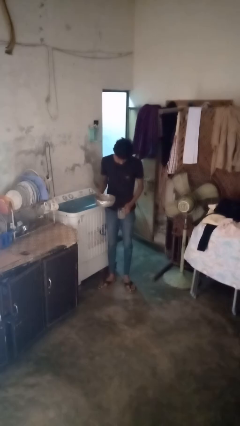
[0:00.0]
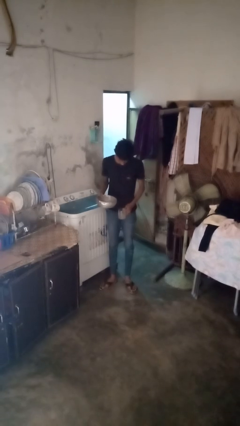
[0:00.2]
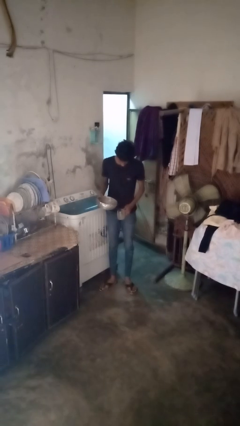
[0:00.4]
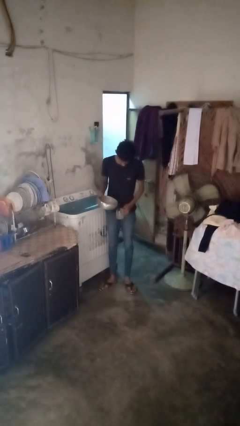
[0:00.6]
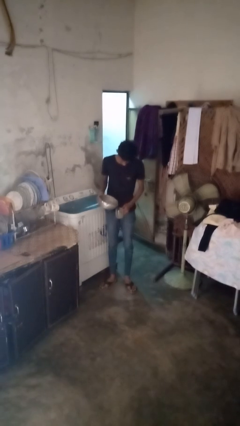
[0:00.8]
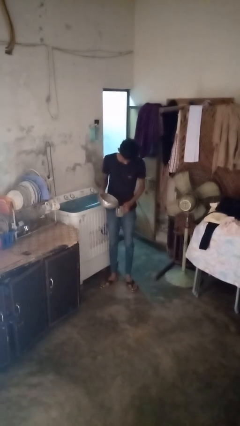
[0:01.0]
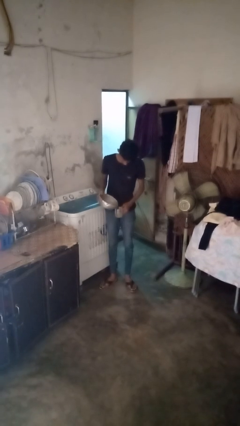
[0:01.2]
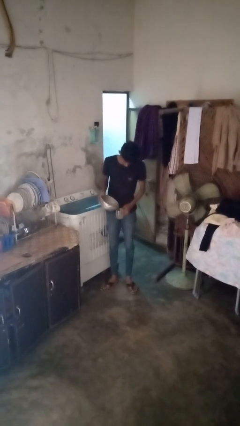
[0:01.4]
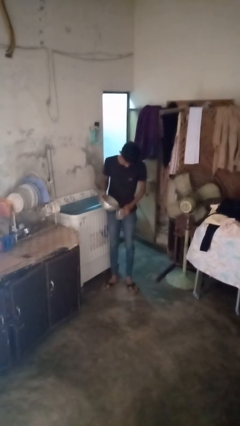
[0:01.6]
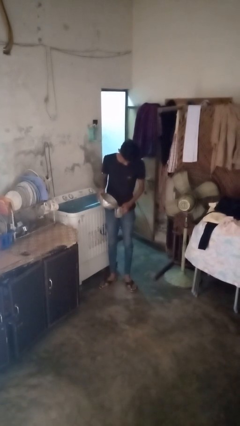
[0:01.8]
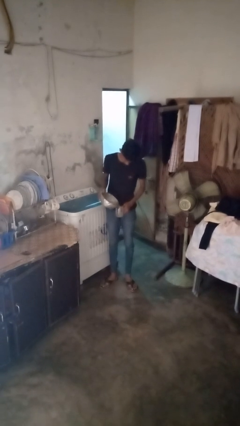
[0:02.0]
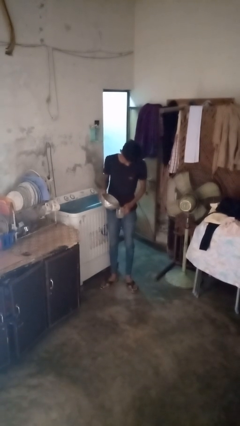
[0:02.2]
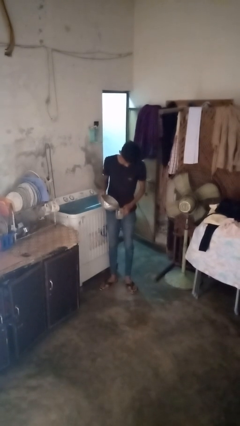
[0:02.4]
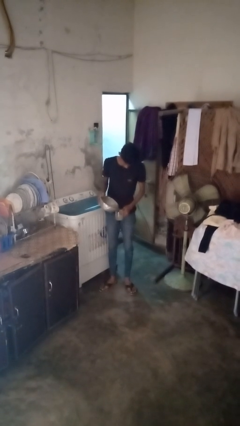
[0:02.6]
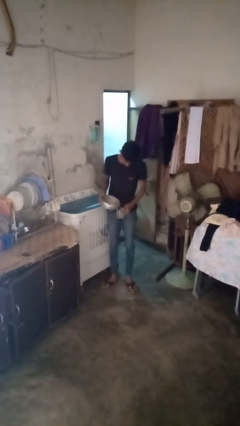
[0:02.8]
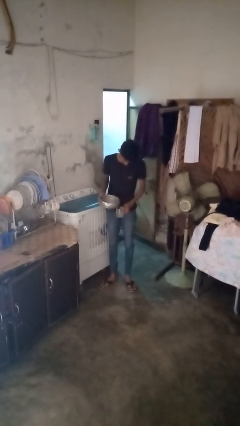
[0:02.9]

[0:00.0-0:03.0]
person pours liquid into cup

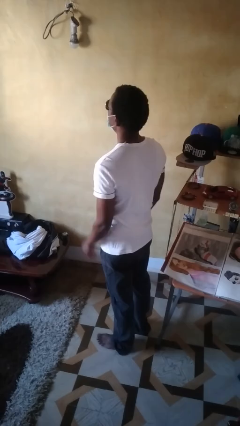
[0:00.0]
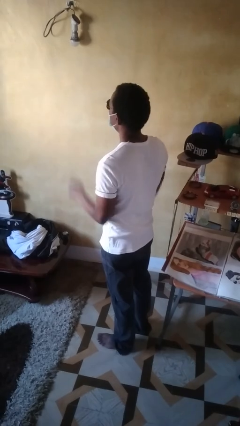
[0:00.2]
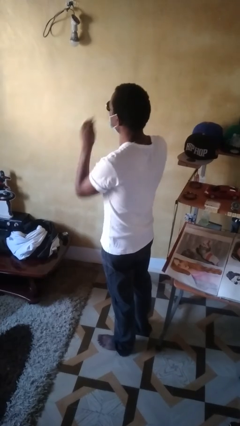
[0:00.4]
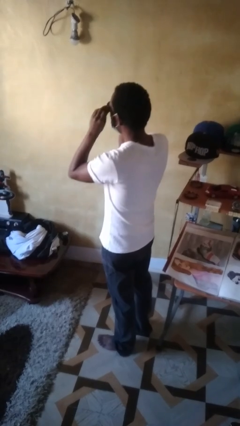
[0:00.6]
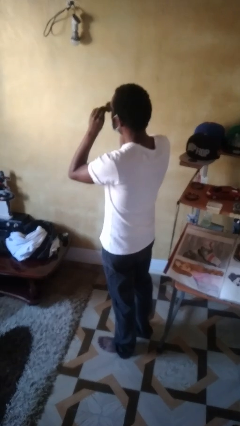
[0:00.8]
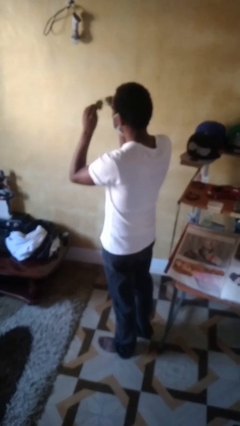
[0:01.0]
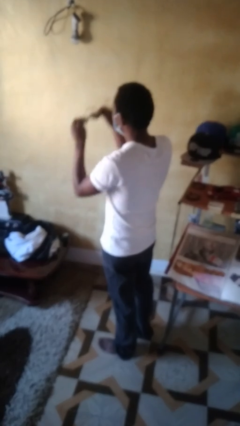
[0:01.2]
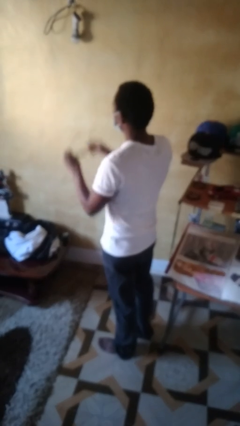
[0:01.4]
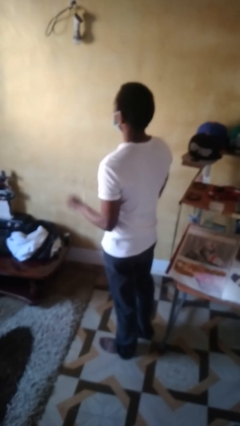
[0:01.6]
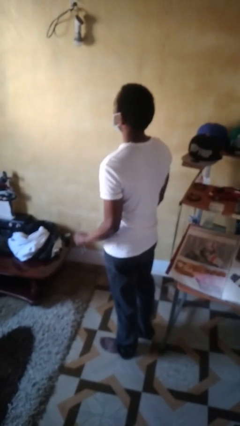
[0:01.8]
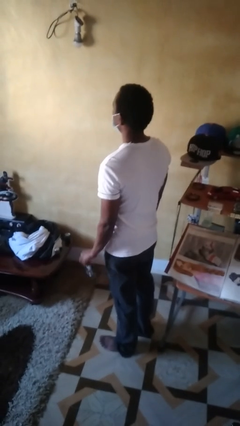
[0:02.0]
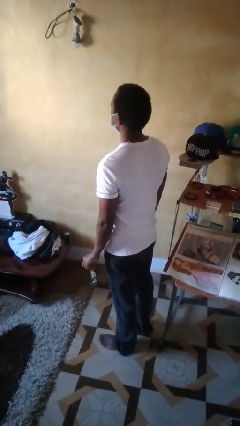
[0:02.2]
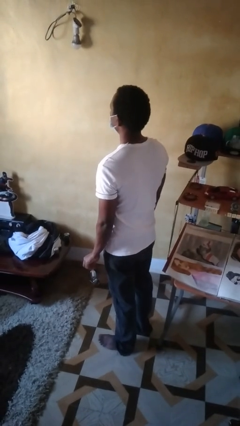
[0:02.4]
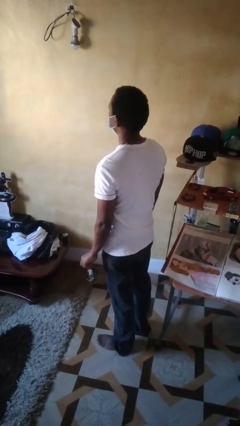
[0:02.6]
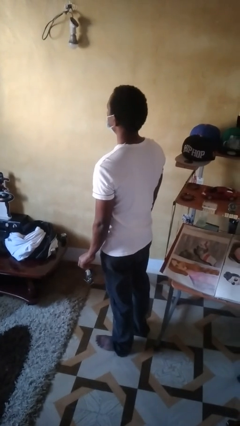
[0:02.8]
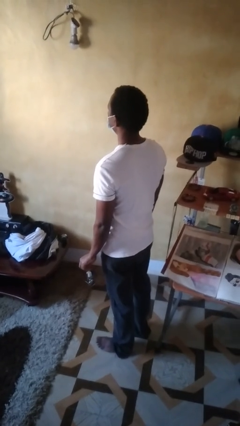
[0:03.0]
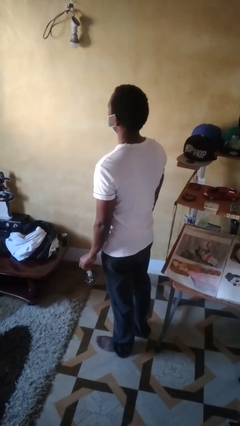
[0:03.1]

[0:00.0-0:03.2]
person takes off sunglasses

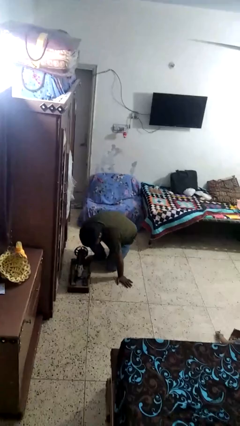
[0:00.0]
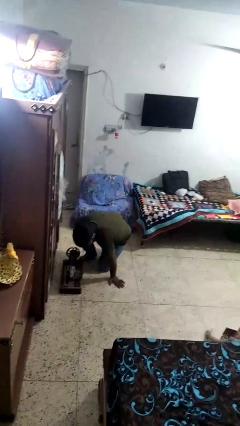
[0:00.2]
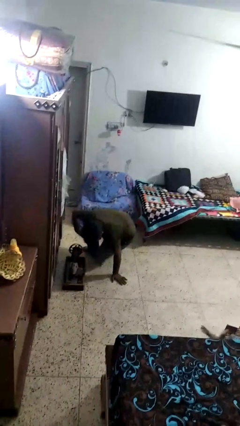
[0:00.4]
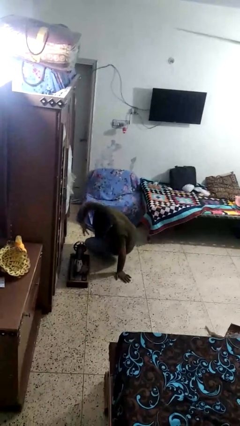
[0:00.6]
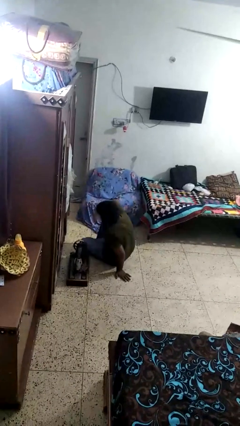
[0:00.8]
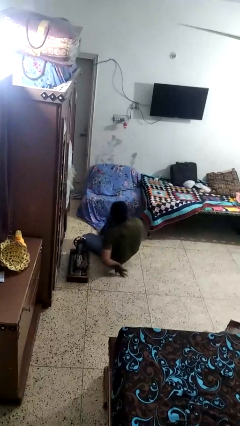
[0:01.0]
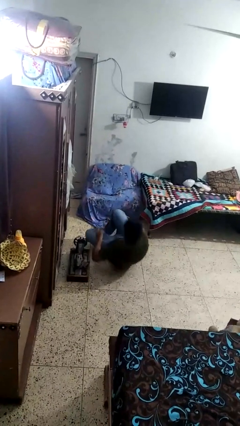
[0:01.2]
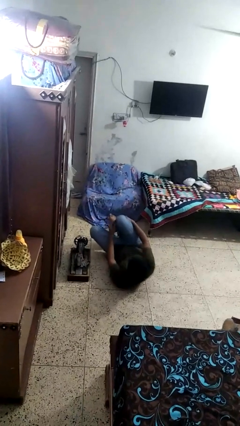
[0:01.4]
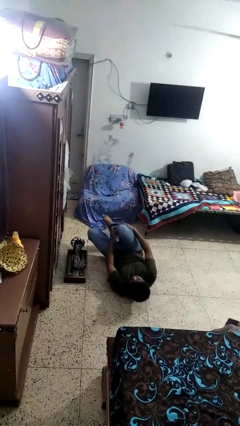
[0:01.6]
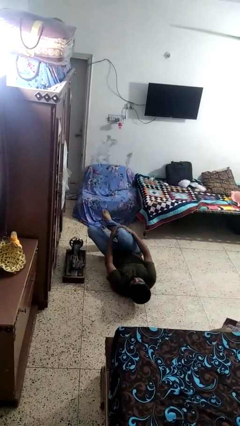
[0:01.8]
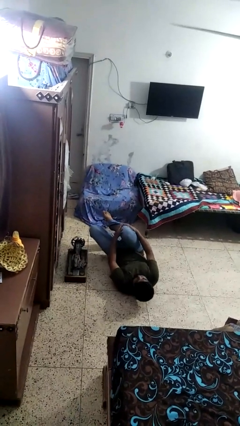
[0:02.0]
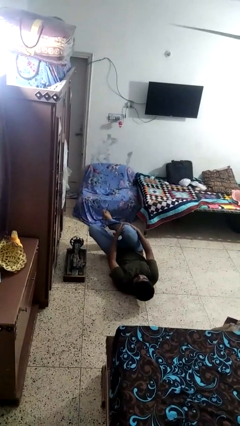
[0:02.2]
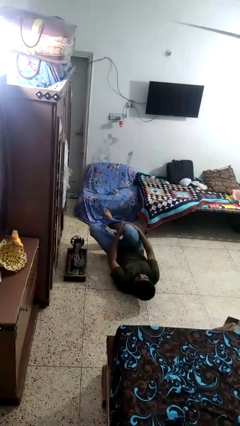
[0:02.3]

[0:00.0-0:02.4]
person lies down on floor

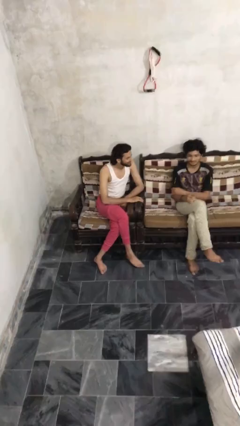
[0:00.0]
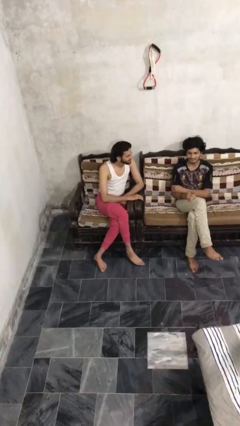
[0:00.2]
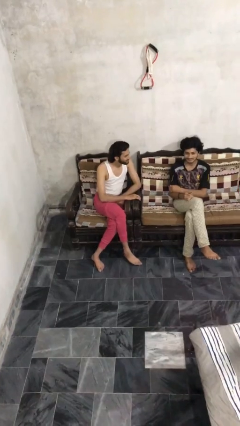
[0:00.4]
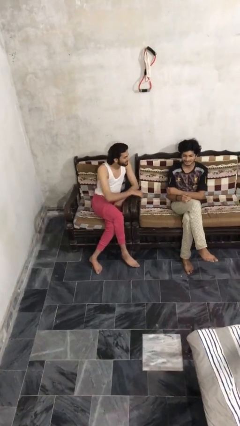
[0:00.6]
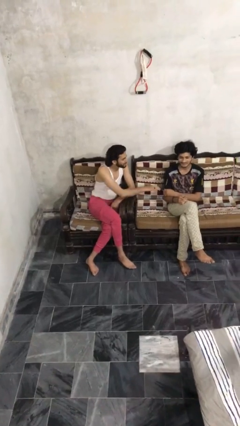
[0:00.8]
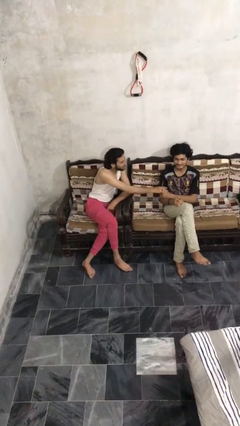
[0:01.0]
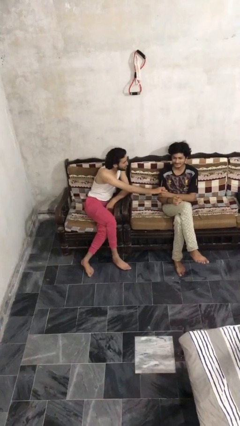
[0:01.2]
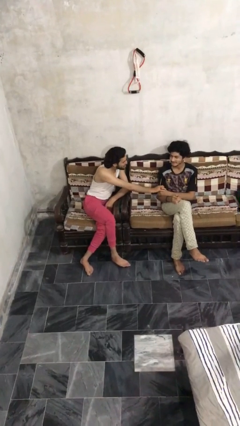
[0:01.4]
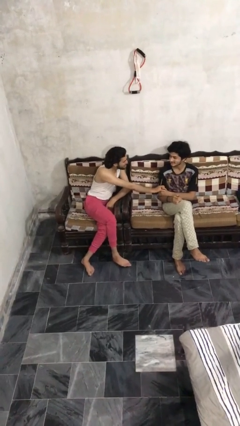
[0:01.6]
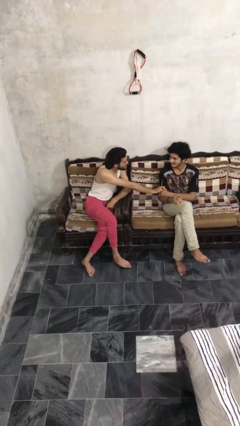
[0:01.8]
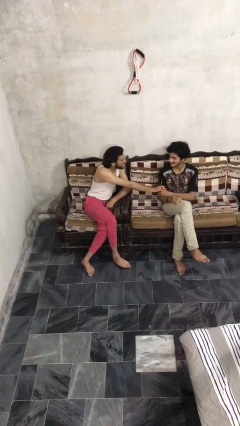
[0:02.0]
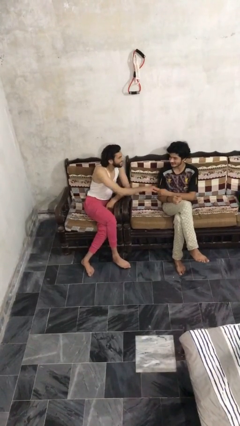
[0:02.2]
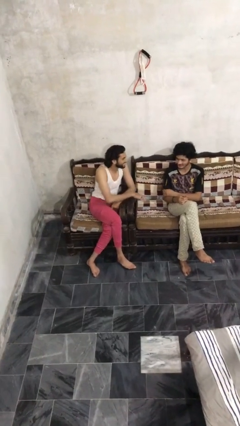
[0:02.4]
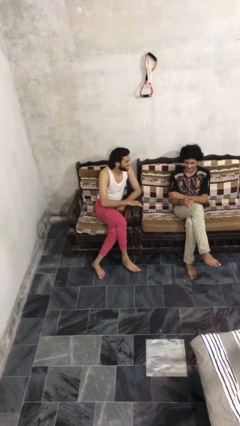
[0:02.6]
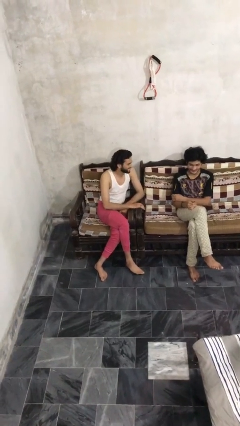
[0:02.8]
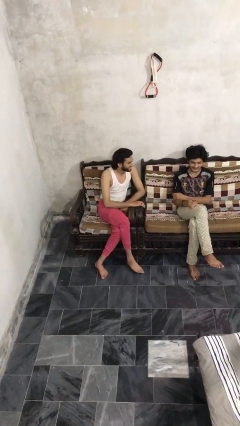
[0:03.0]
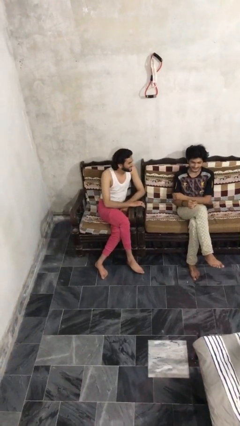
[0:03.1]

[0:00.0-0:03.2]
person grabs person by bicep

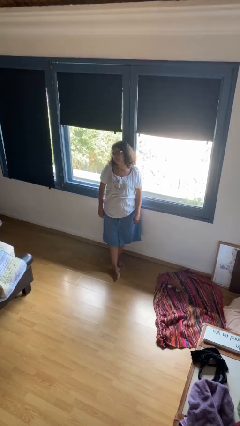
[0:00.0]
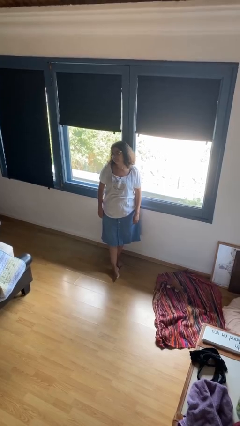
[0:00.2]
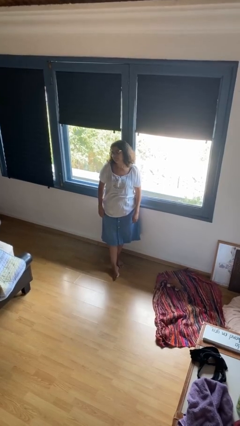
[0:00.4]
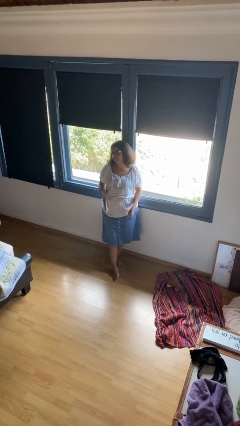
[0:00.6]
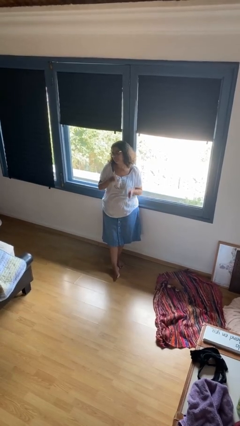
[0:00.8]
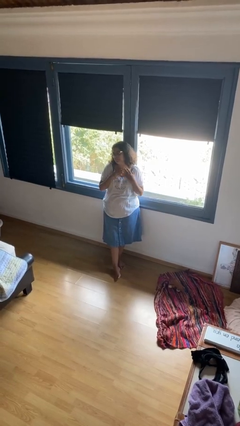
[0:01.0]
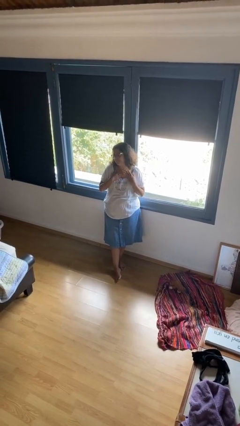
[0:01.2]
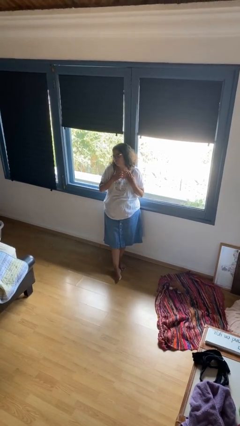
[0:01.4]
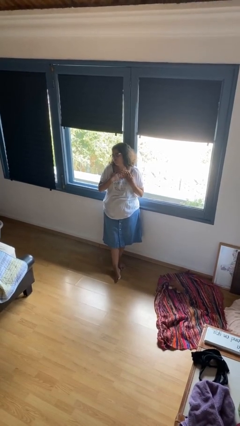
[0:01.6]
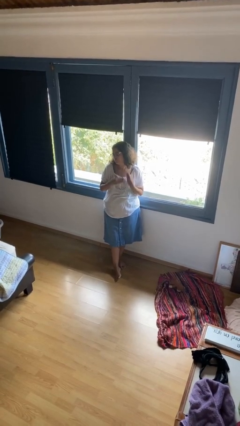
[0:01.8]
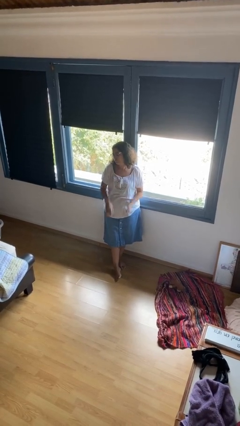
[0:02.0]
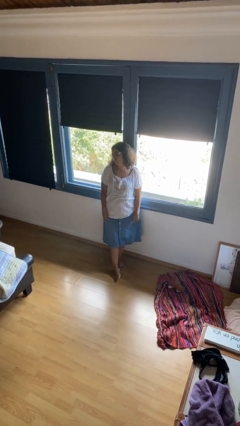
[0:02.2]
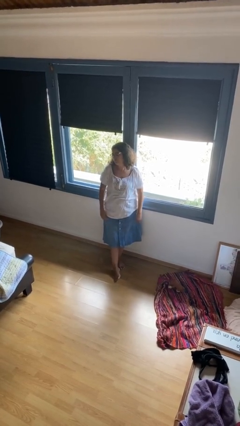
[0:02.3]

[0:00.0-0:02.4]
person drums on chest

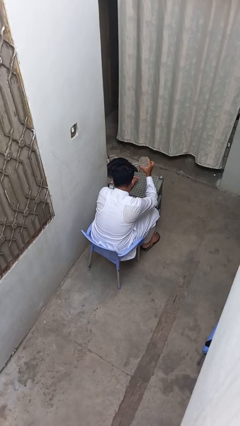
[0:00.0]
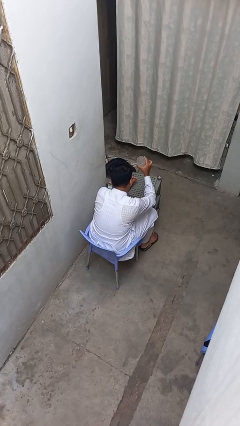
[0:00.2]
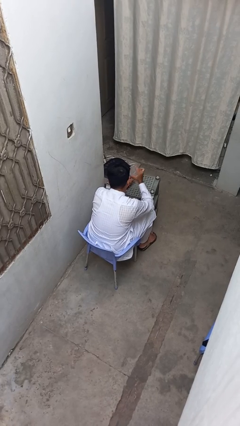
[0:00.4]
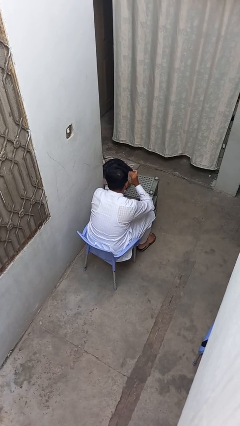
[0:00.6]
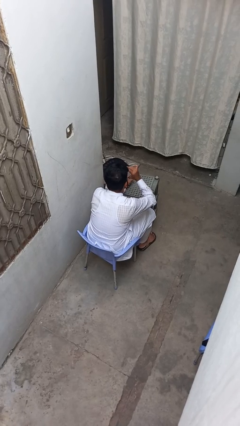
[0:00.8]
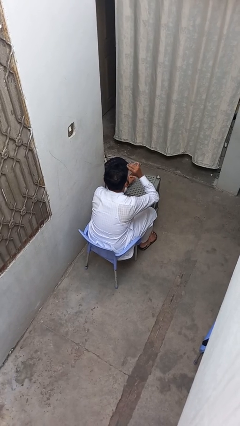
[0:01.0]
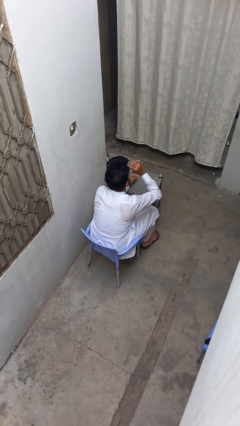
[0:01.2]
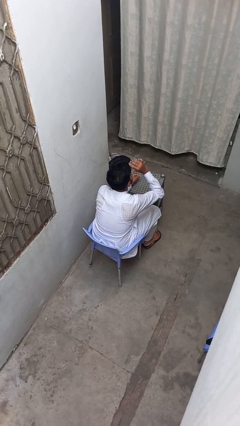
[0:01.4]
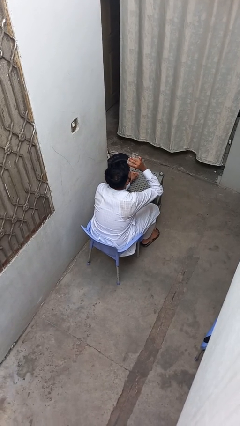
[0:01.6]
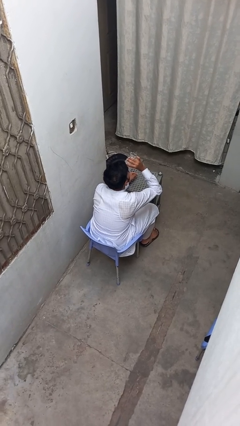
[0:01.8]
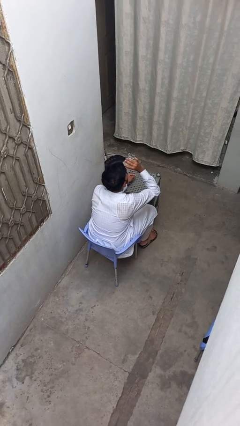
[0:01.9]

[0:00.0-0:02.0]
person drinks from shotglass

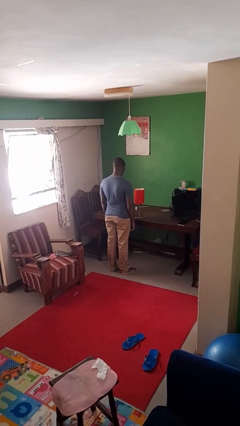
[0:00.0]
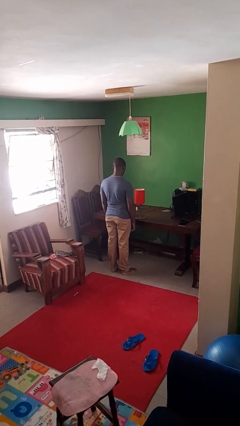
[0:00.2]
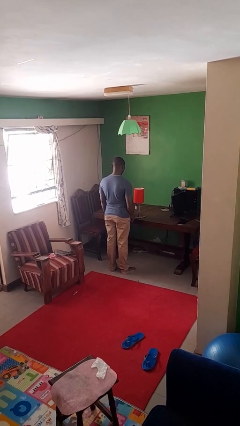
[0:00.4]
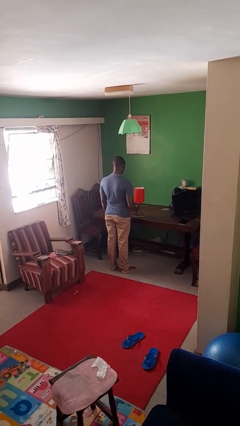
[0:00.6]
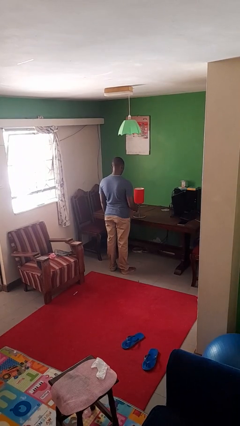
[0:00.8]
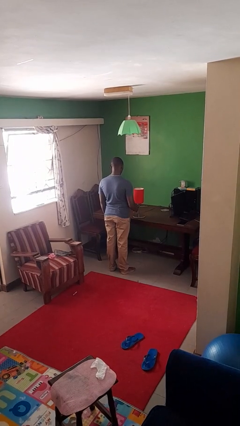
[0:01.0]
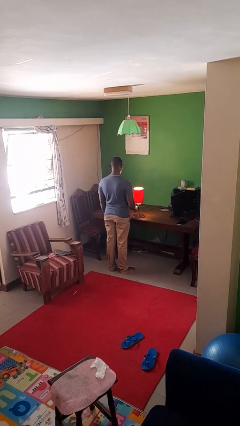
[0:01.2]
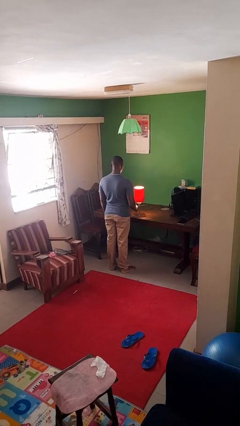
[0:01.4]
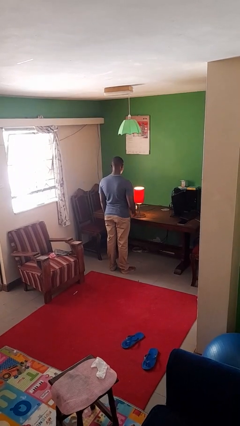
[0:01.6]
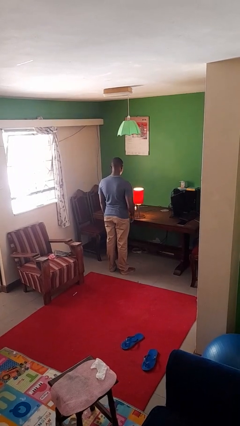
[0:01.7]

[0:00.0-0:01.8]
person turns on lamp
